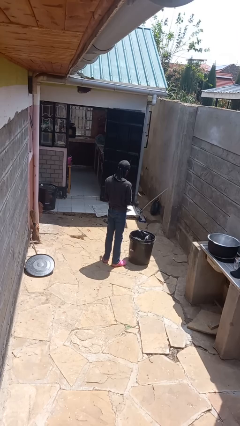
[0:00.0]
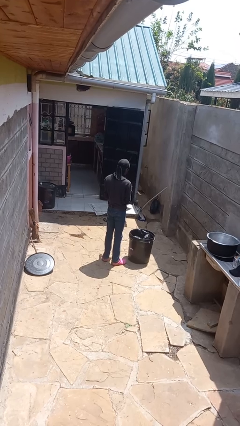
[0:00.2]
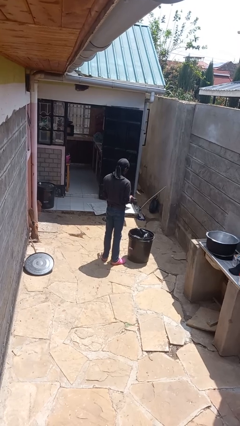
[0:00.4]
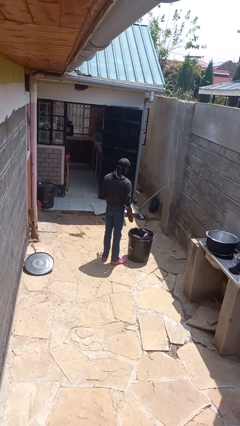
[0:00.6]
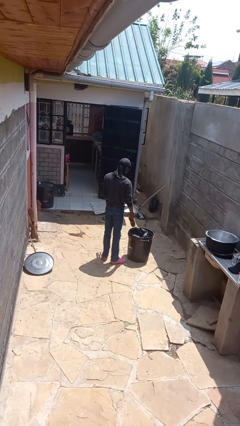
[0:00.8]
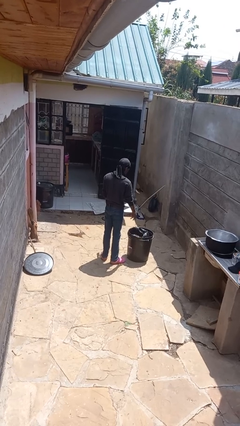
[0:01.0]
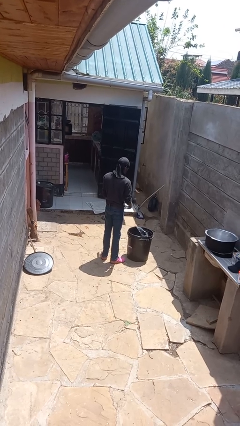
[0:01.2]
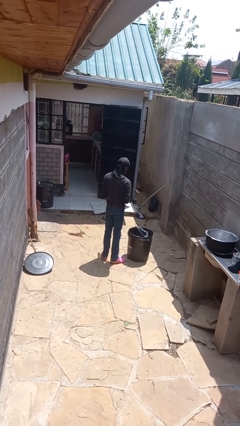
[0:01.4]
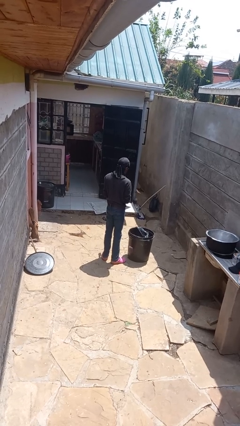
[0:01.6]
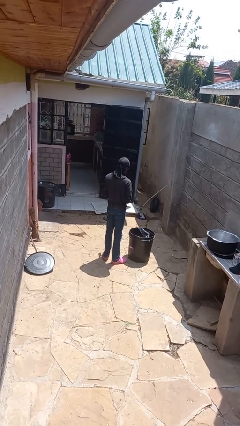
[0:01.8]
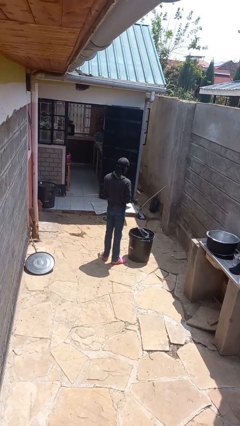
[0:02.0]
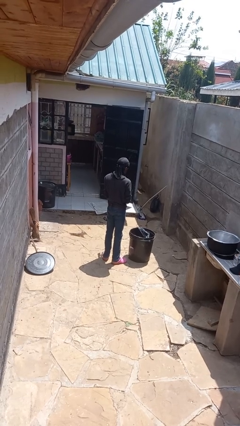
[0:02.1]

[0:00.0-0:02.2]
person discards trash

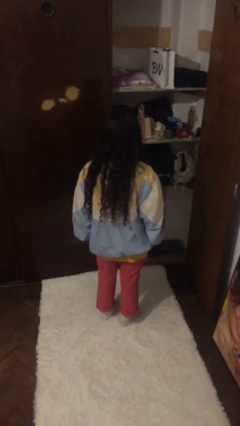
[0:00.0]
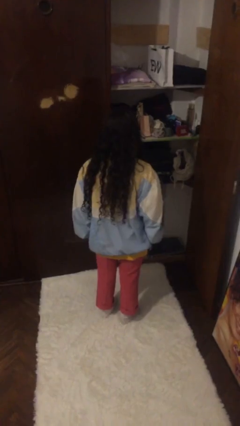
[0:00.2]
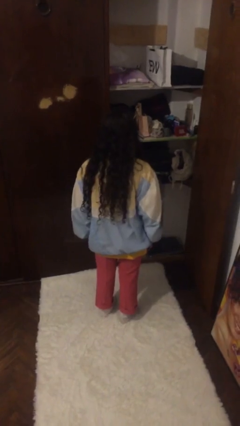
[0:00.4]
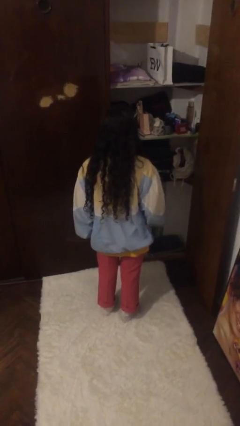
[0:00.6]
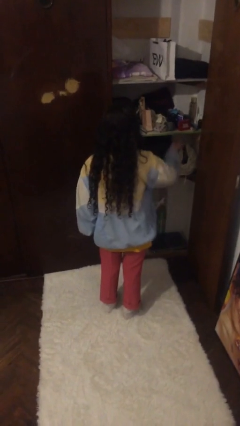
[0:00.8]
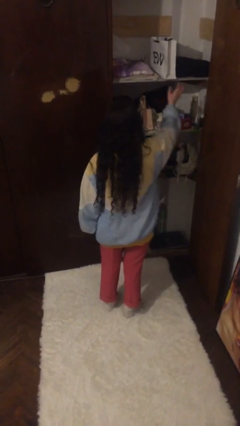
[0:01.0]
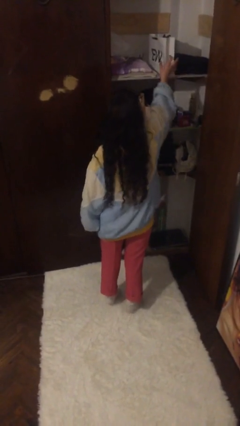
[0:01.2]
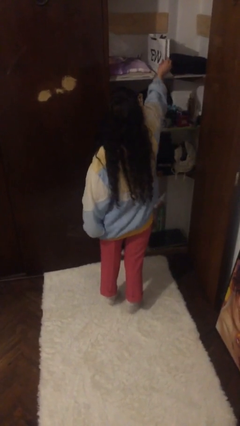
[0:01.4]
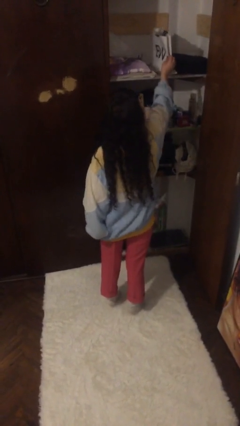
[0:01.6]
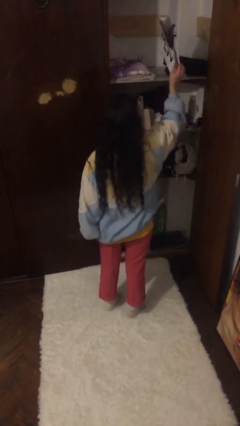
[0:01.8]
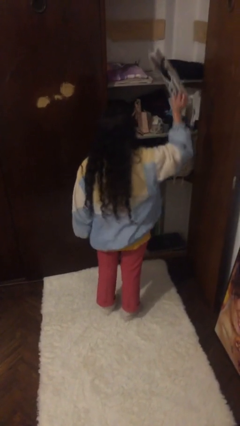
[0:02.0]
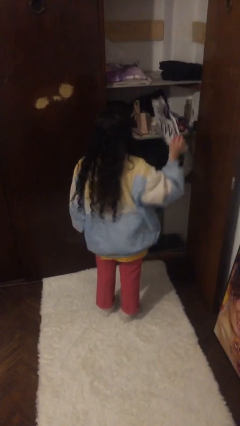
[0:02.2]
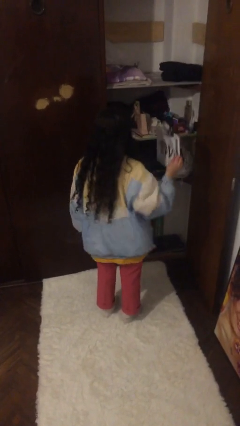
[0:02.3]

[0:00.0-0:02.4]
person picks up object from shelf

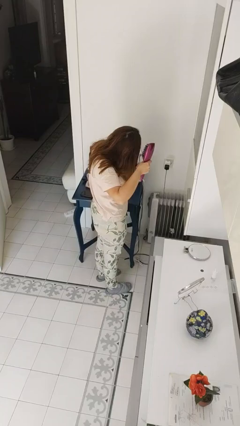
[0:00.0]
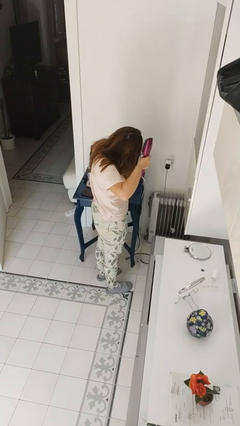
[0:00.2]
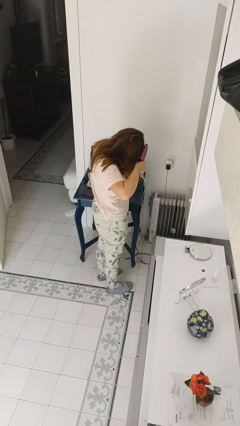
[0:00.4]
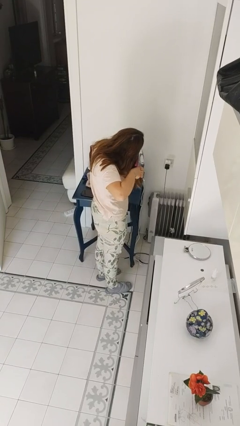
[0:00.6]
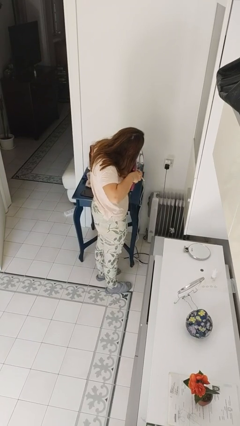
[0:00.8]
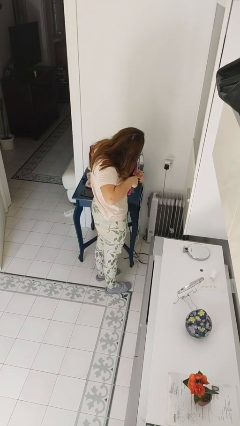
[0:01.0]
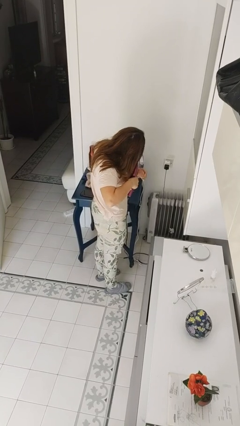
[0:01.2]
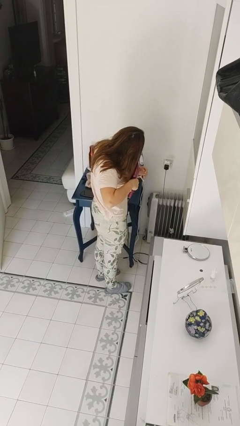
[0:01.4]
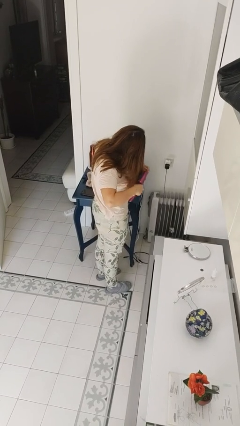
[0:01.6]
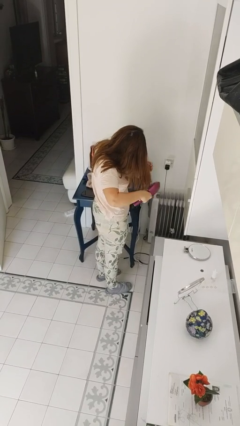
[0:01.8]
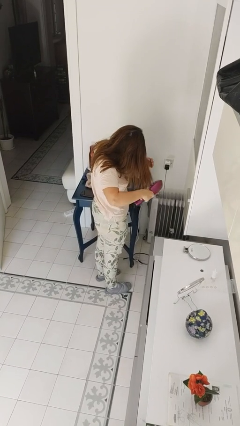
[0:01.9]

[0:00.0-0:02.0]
person dries hair with hairdryer

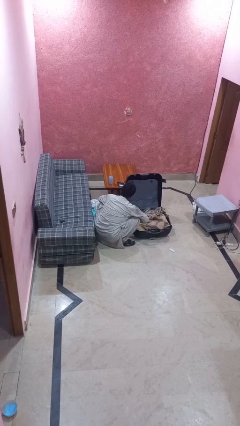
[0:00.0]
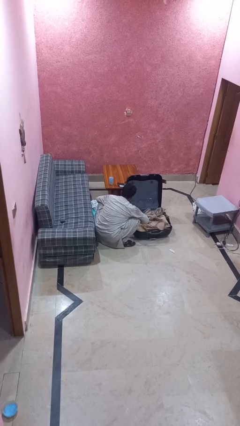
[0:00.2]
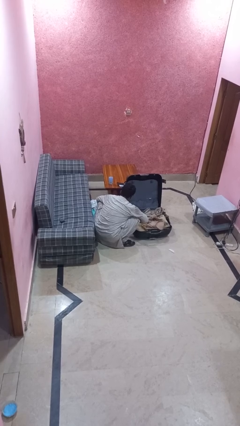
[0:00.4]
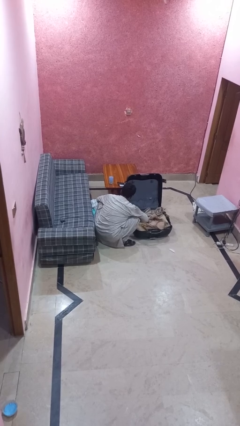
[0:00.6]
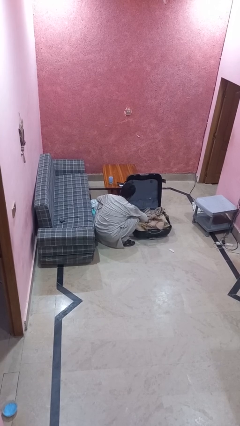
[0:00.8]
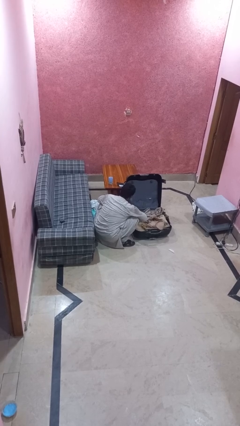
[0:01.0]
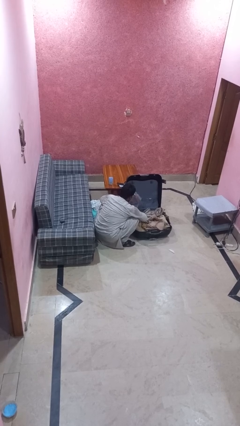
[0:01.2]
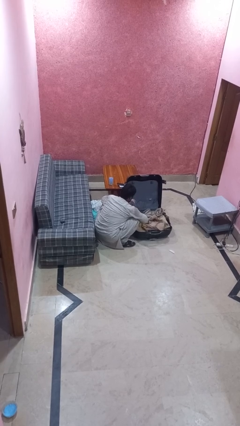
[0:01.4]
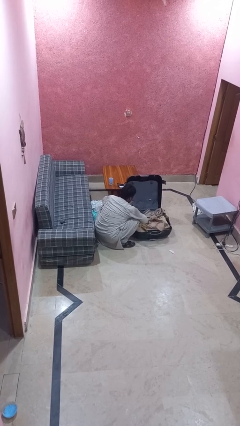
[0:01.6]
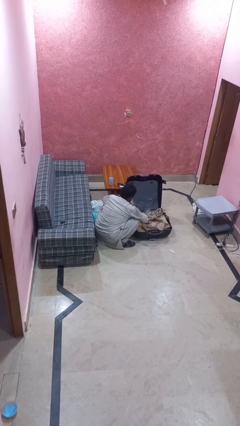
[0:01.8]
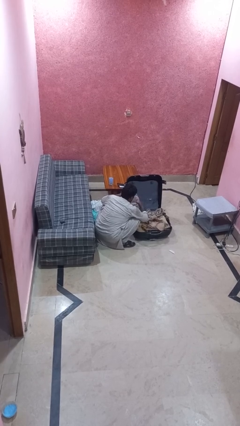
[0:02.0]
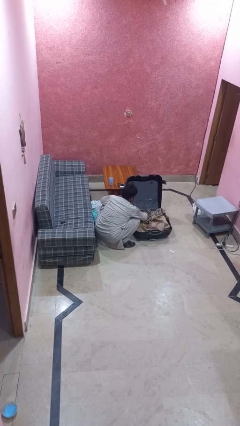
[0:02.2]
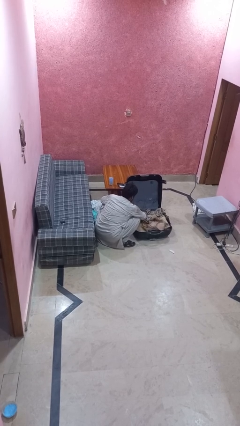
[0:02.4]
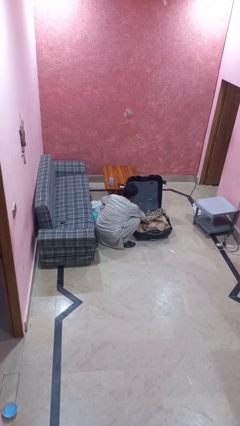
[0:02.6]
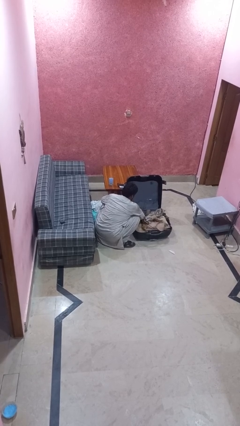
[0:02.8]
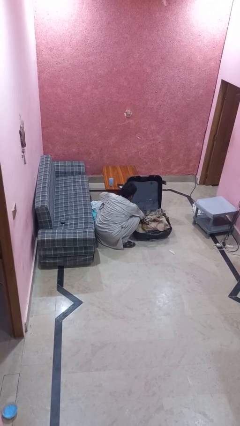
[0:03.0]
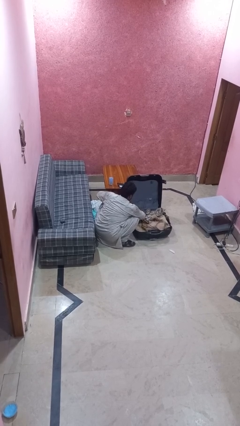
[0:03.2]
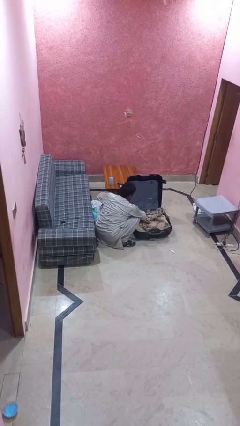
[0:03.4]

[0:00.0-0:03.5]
person loads clothes into suitcase

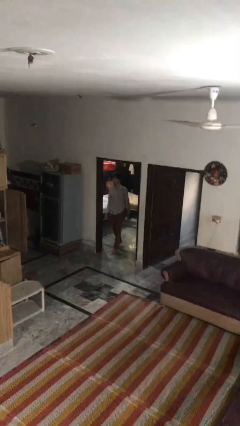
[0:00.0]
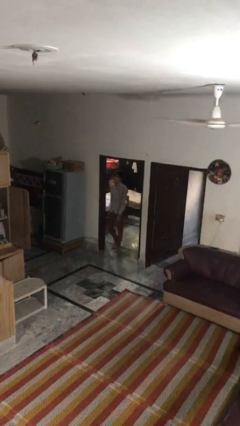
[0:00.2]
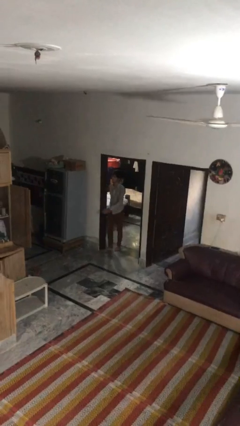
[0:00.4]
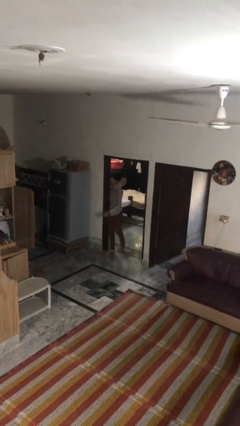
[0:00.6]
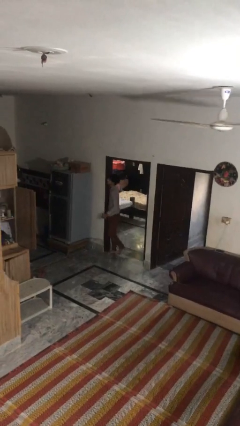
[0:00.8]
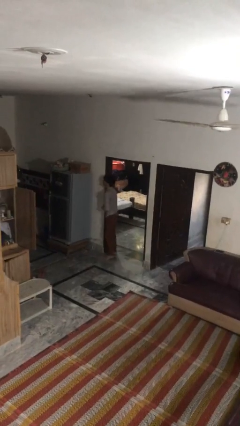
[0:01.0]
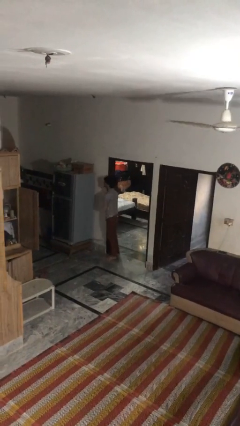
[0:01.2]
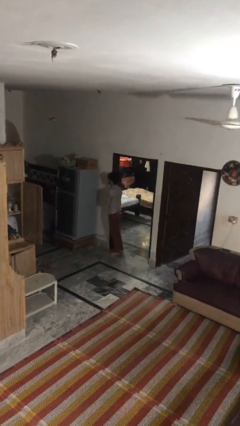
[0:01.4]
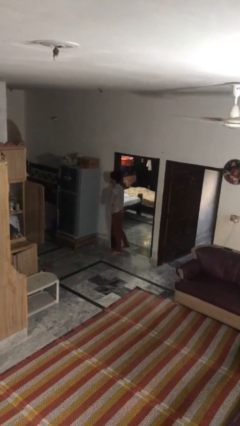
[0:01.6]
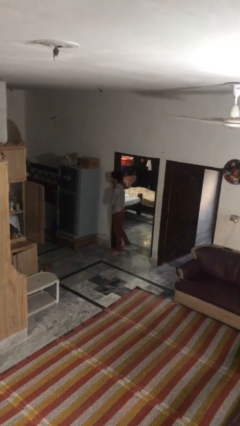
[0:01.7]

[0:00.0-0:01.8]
person bumps into wall

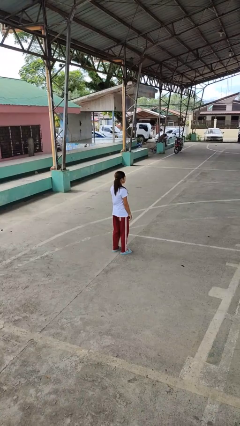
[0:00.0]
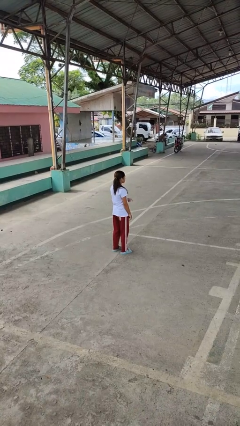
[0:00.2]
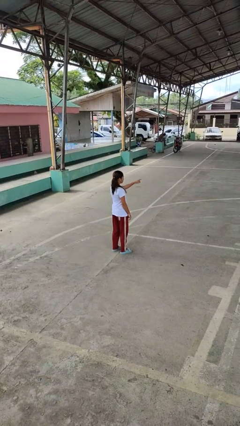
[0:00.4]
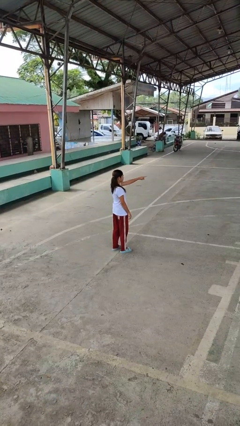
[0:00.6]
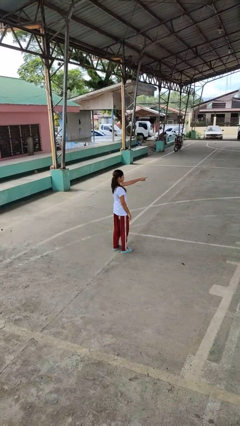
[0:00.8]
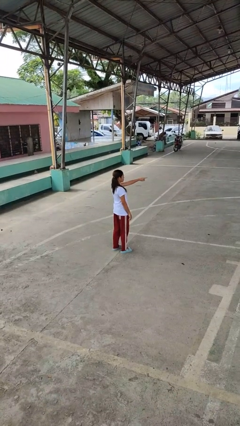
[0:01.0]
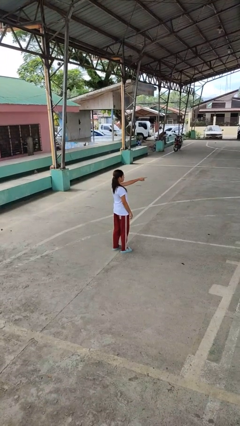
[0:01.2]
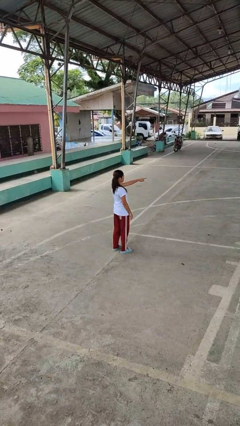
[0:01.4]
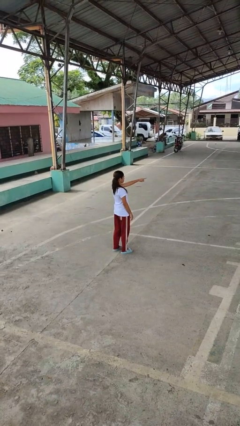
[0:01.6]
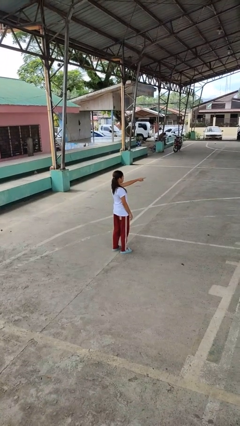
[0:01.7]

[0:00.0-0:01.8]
person points at person

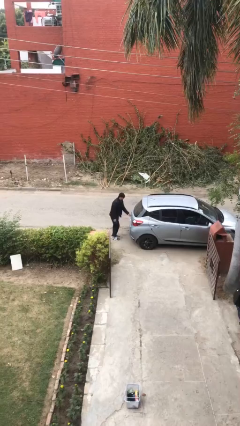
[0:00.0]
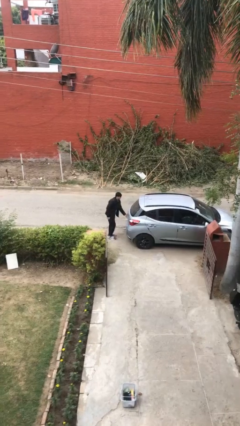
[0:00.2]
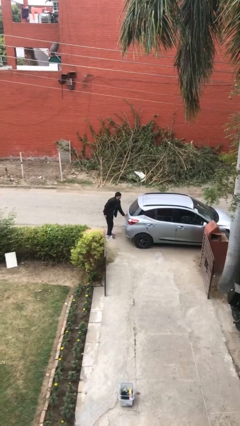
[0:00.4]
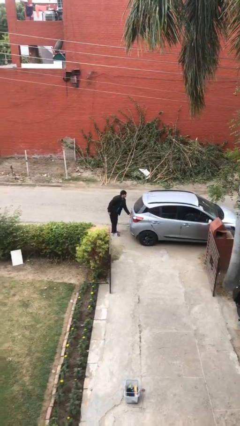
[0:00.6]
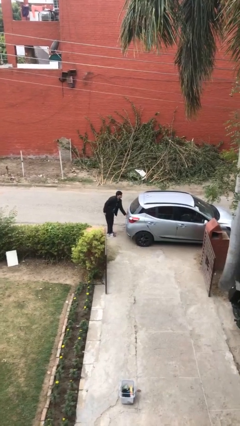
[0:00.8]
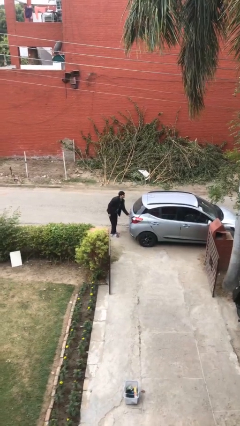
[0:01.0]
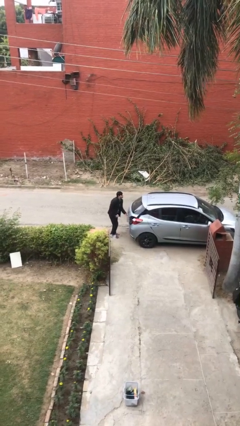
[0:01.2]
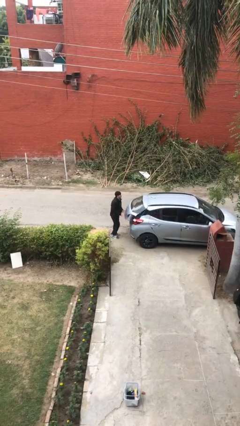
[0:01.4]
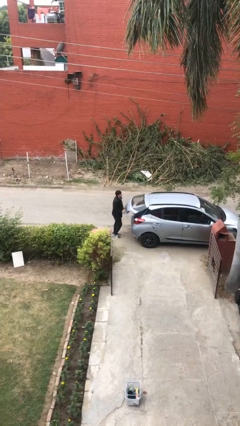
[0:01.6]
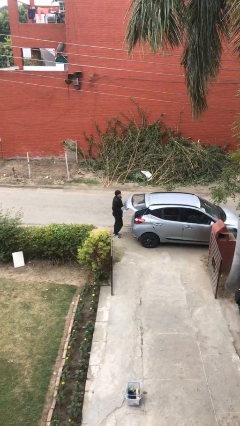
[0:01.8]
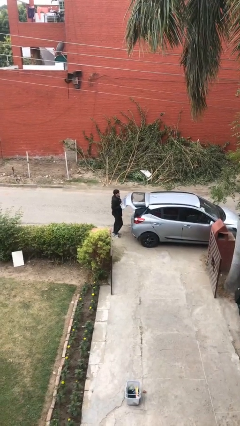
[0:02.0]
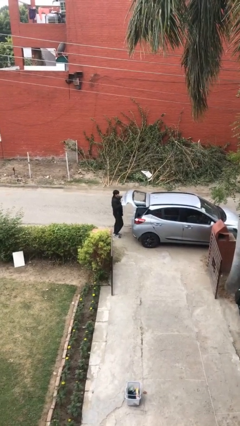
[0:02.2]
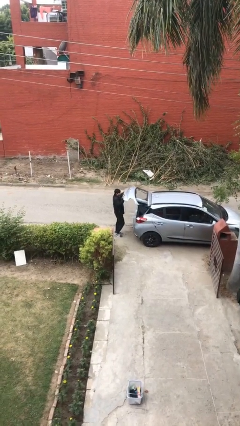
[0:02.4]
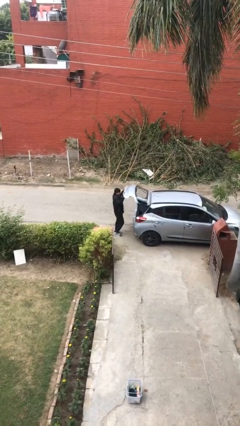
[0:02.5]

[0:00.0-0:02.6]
person opens car trunk

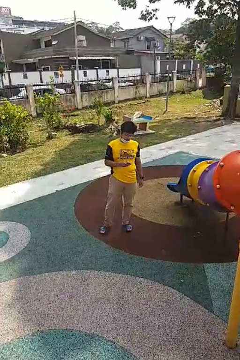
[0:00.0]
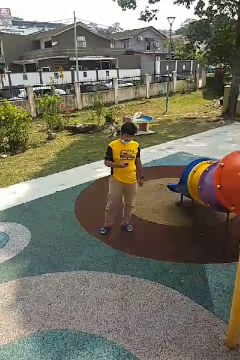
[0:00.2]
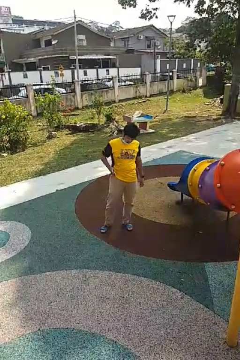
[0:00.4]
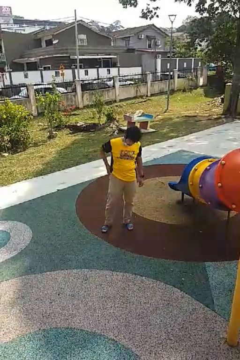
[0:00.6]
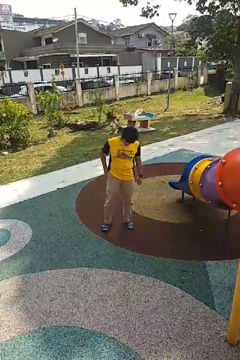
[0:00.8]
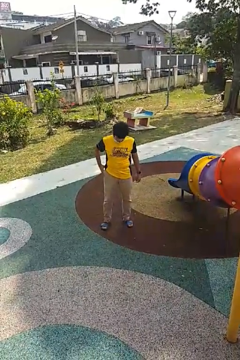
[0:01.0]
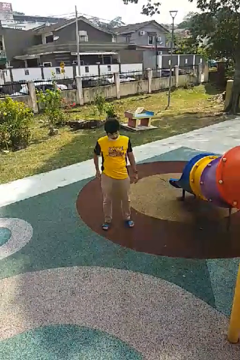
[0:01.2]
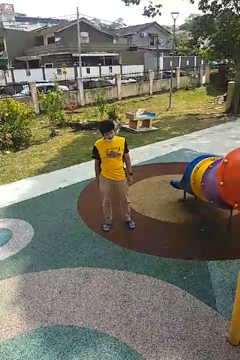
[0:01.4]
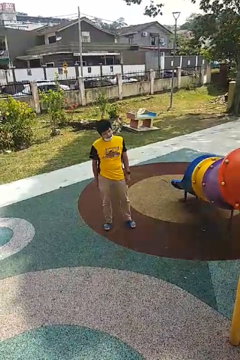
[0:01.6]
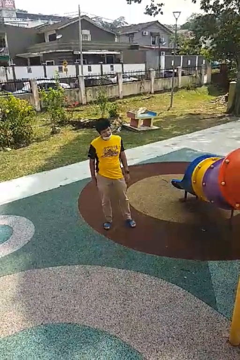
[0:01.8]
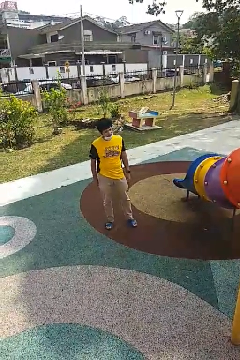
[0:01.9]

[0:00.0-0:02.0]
person puts phone into pocket
